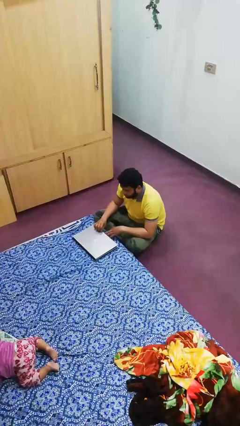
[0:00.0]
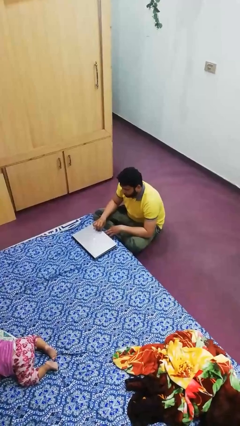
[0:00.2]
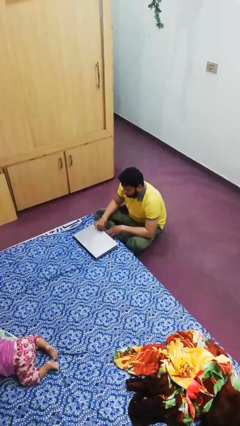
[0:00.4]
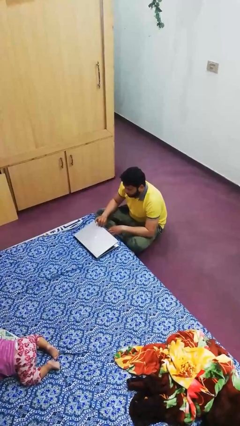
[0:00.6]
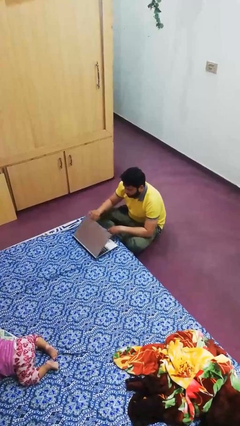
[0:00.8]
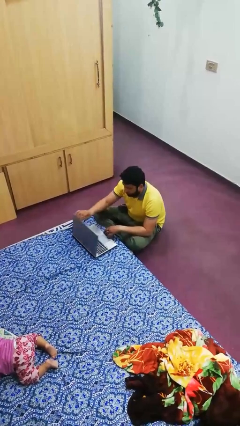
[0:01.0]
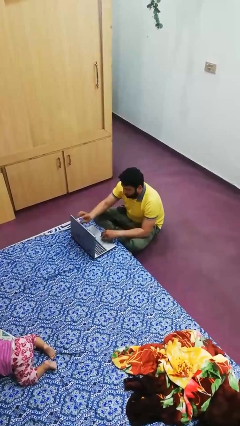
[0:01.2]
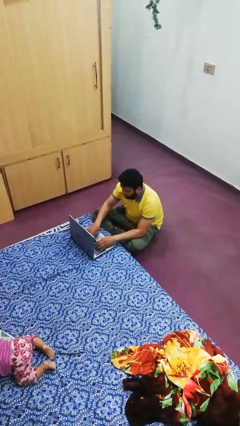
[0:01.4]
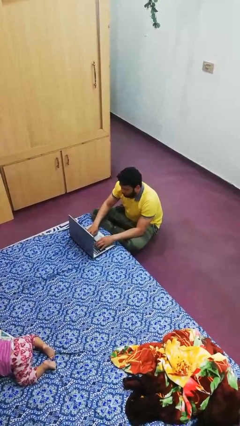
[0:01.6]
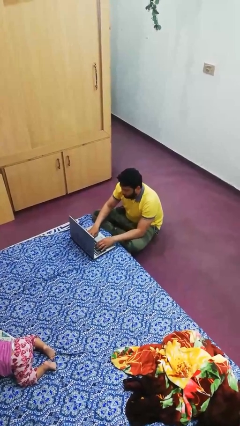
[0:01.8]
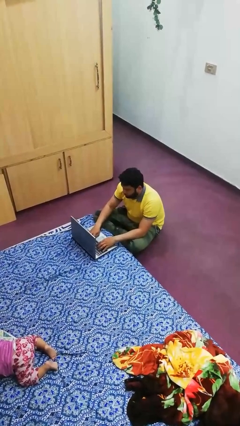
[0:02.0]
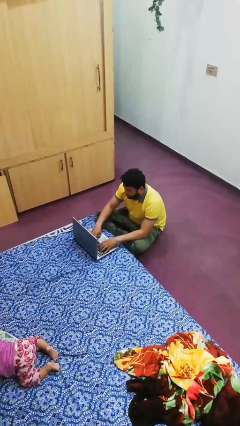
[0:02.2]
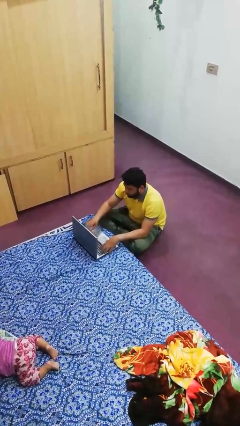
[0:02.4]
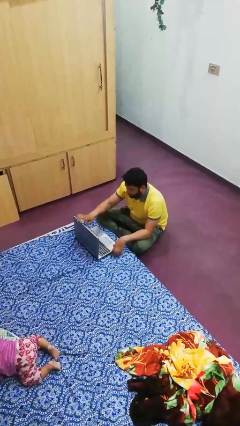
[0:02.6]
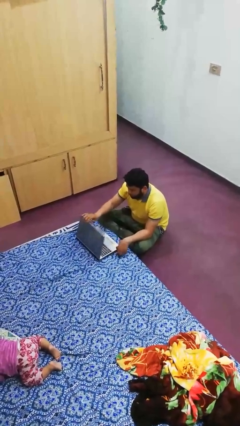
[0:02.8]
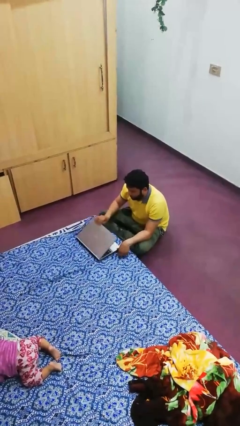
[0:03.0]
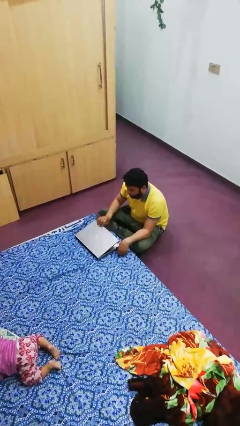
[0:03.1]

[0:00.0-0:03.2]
person interacts with laptop

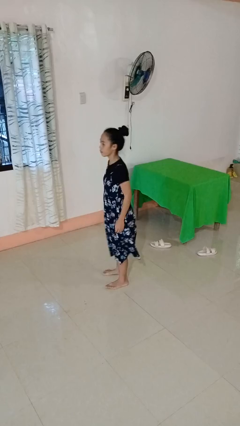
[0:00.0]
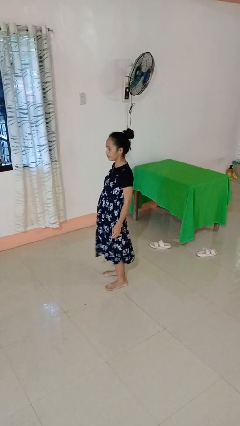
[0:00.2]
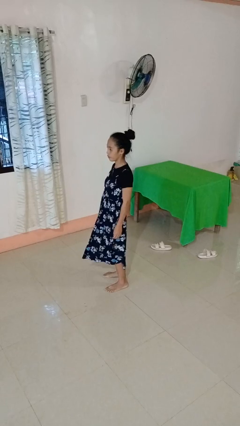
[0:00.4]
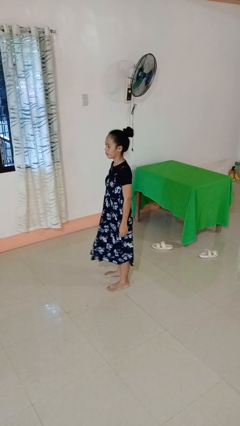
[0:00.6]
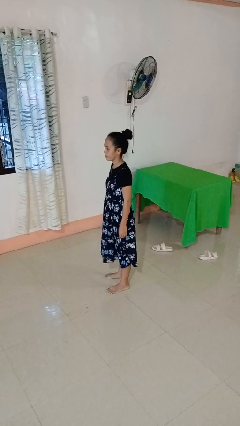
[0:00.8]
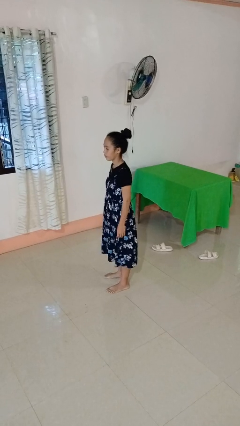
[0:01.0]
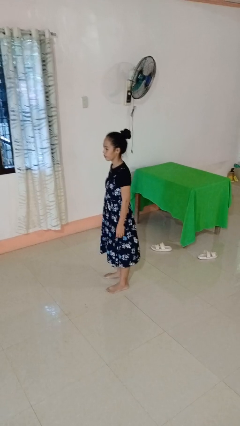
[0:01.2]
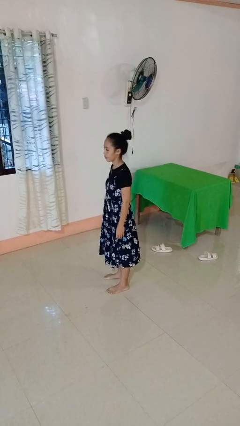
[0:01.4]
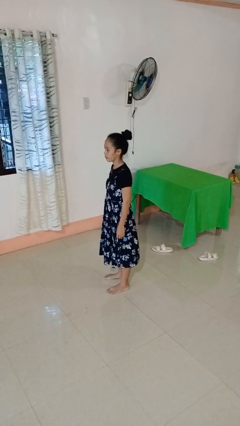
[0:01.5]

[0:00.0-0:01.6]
person wiggles hips

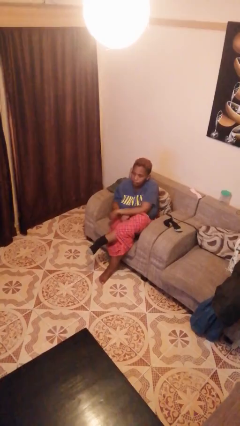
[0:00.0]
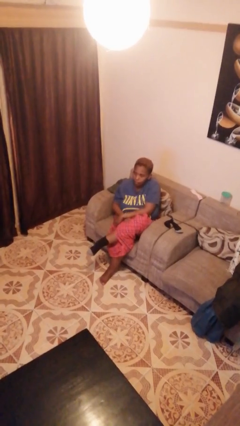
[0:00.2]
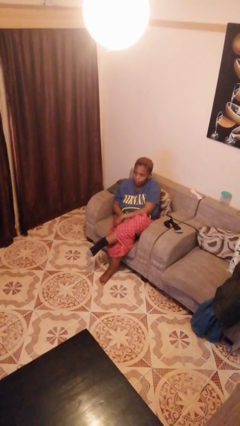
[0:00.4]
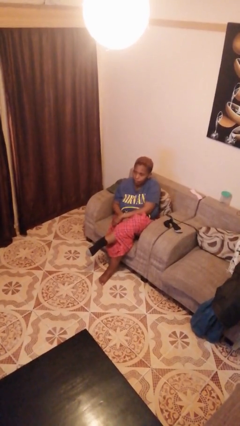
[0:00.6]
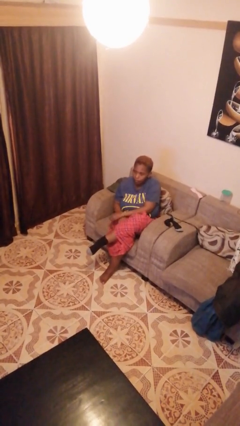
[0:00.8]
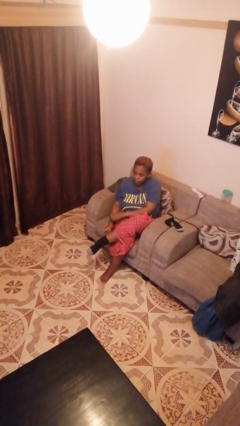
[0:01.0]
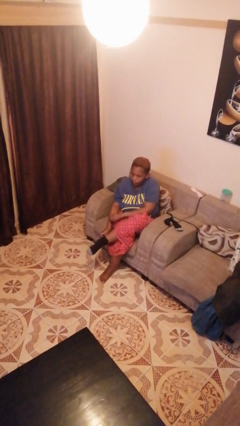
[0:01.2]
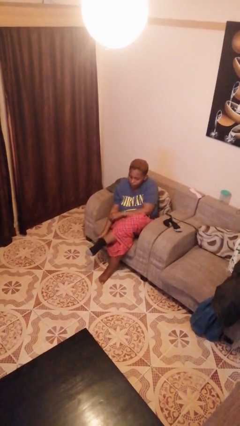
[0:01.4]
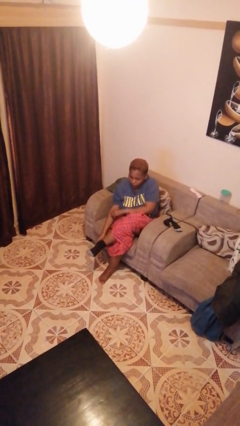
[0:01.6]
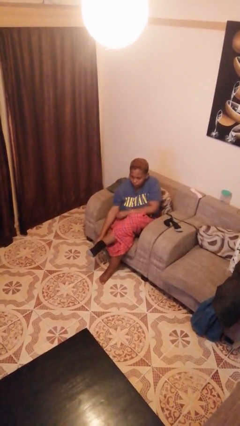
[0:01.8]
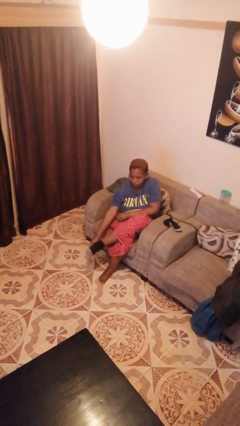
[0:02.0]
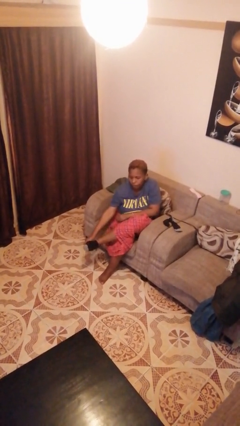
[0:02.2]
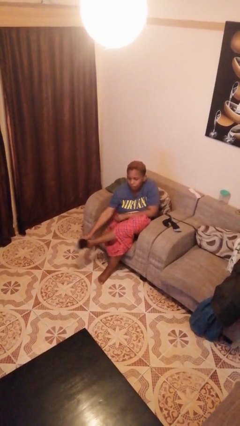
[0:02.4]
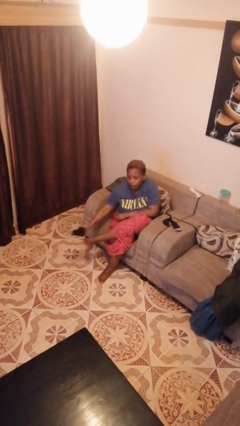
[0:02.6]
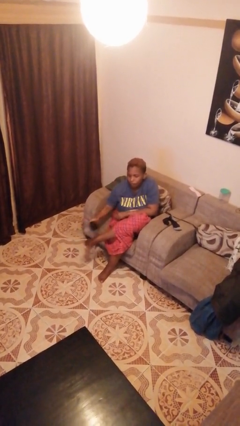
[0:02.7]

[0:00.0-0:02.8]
person takes off socks

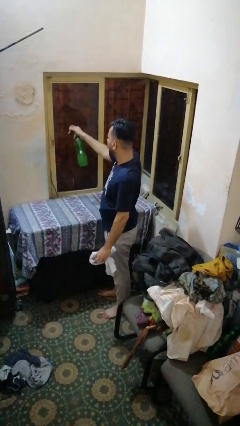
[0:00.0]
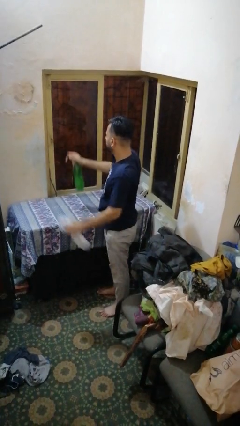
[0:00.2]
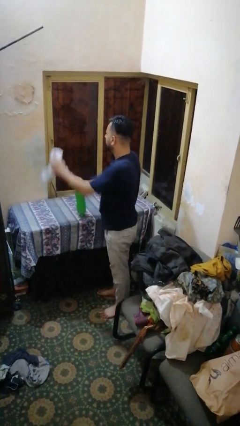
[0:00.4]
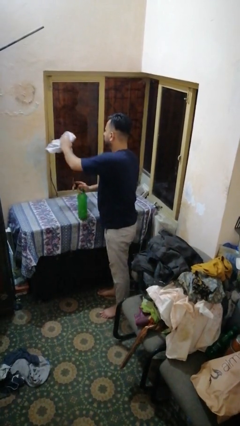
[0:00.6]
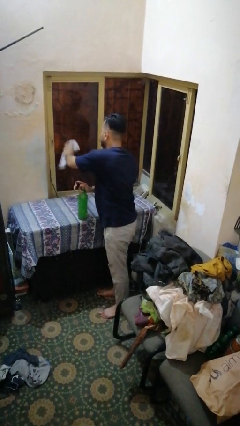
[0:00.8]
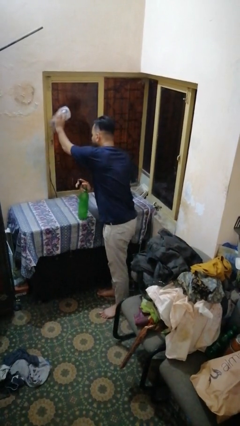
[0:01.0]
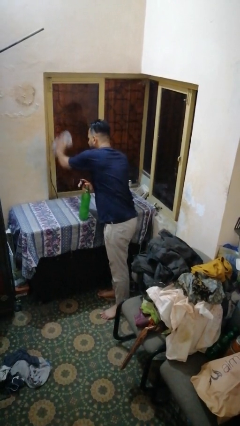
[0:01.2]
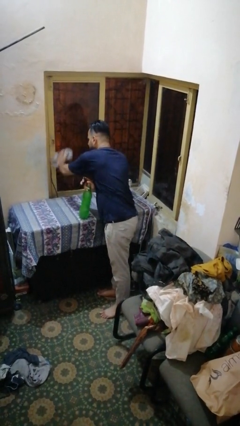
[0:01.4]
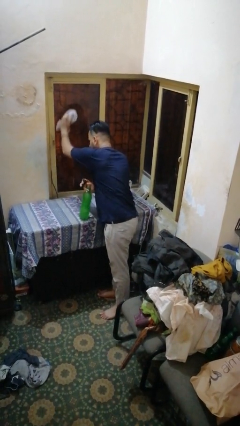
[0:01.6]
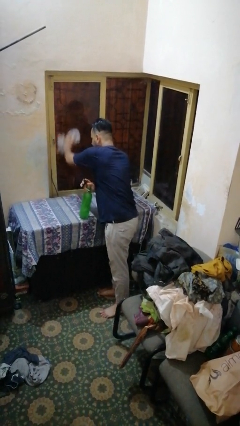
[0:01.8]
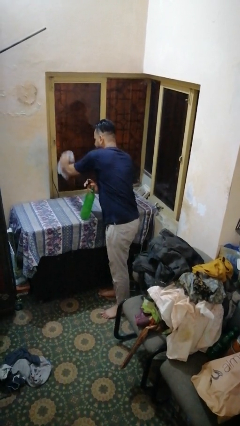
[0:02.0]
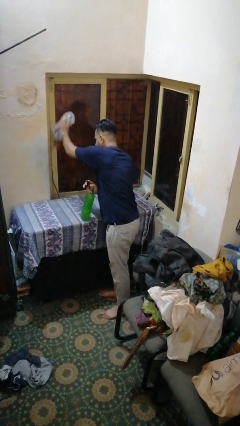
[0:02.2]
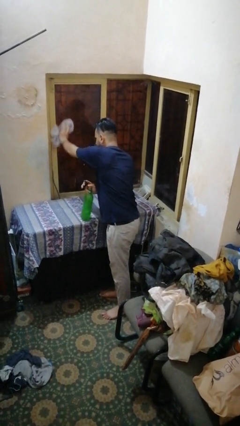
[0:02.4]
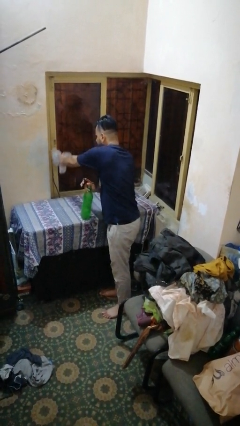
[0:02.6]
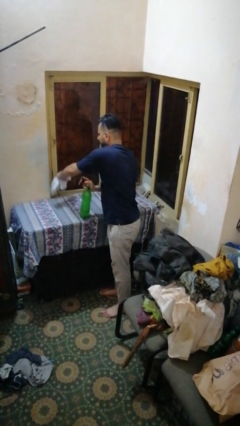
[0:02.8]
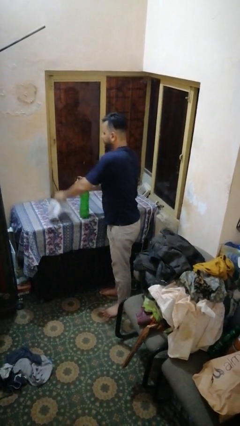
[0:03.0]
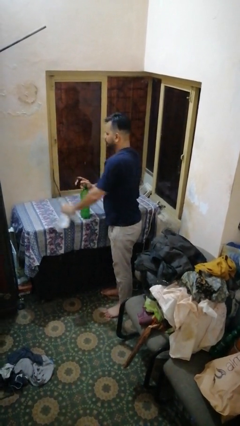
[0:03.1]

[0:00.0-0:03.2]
person washes window

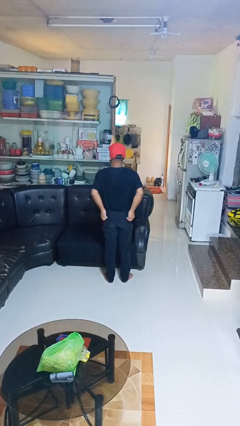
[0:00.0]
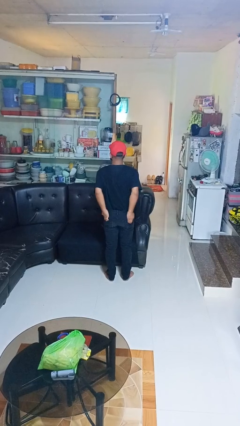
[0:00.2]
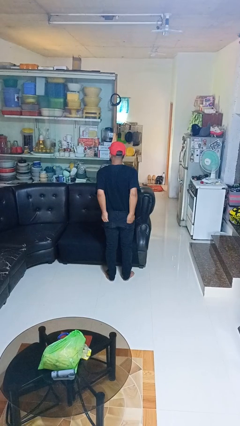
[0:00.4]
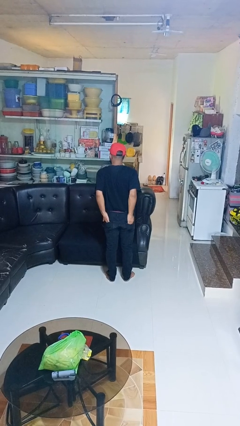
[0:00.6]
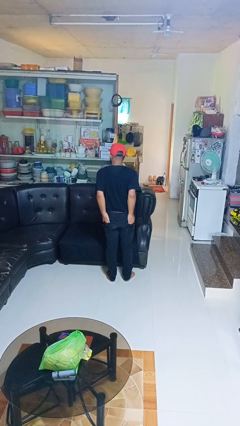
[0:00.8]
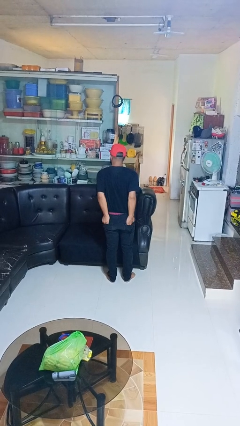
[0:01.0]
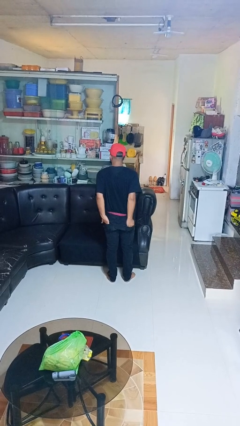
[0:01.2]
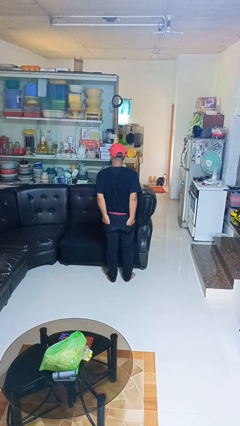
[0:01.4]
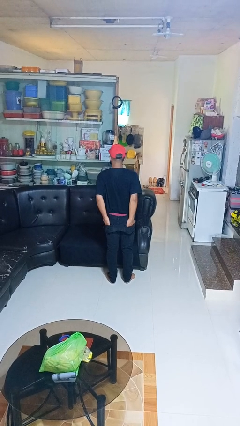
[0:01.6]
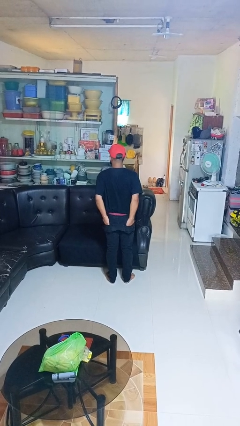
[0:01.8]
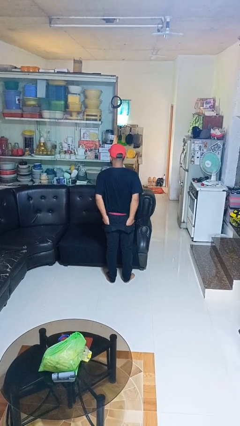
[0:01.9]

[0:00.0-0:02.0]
person puts hands in back pockets

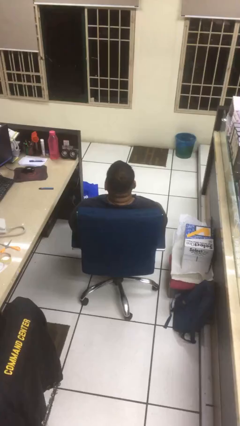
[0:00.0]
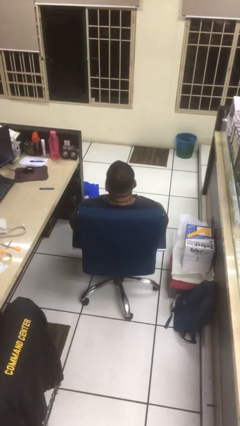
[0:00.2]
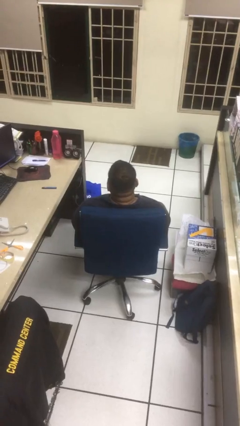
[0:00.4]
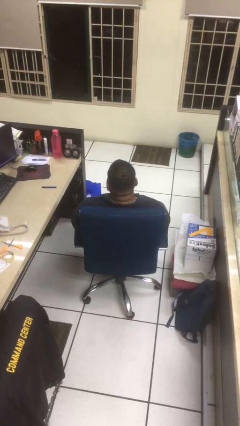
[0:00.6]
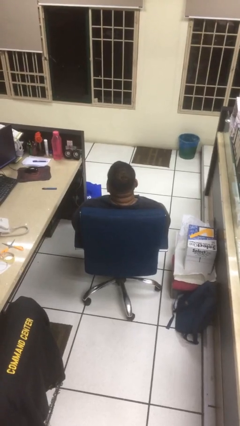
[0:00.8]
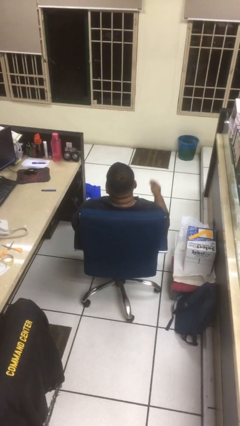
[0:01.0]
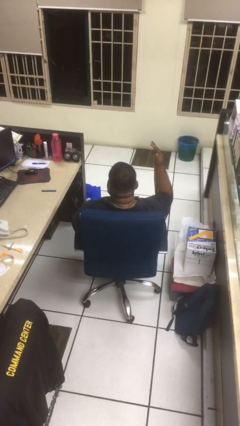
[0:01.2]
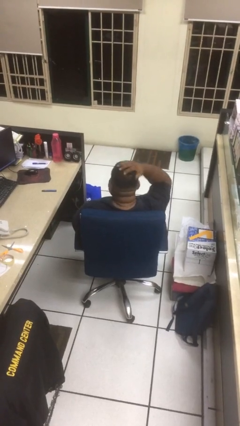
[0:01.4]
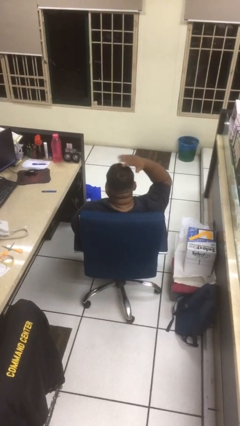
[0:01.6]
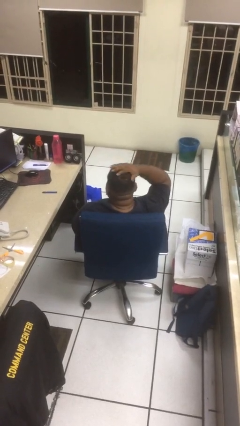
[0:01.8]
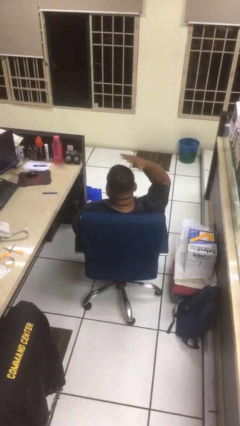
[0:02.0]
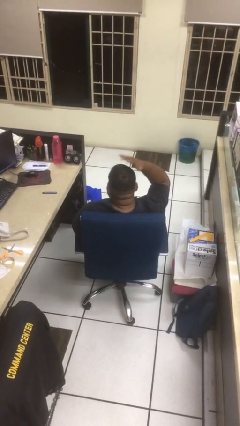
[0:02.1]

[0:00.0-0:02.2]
person pats head

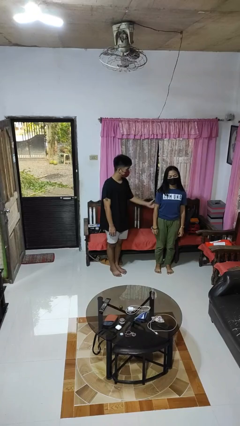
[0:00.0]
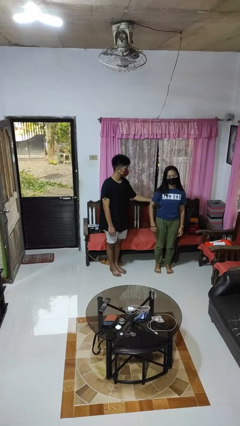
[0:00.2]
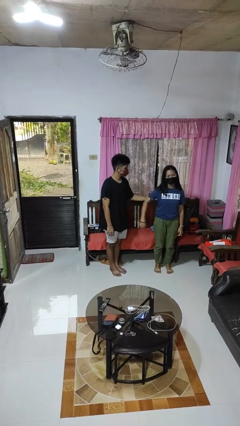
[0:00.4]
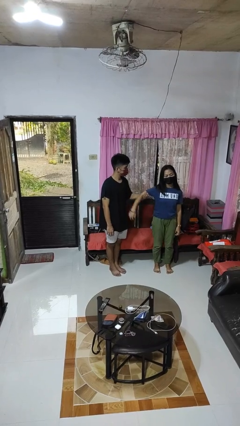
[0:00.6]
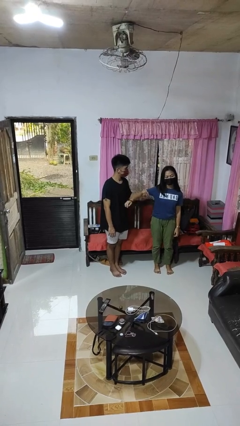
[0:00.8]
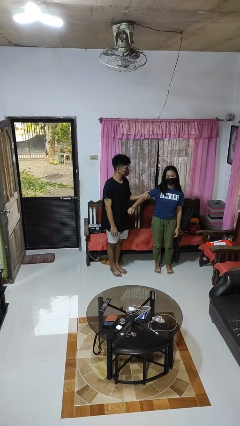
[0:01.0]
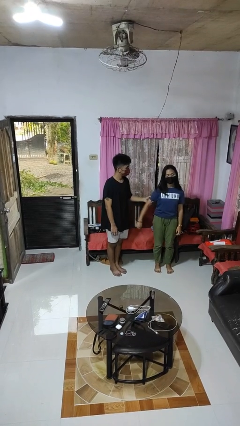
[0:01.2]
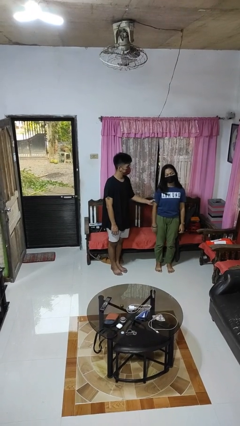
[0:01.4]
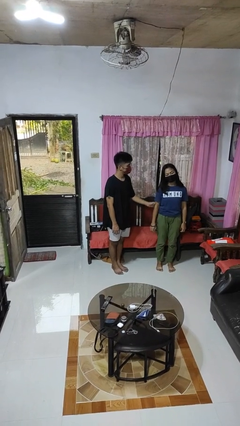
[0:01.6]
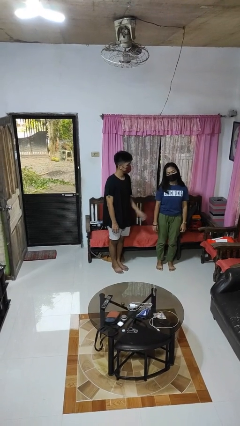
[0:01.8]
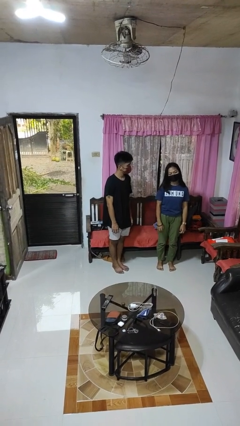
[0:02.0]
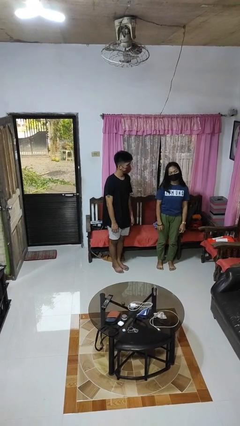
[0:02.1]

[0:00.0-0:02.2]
person grabs person by bicep
